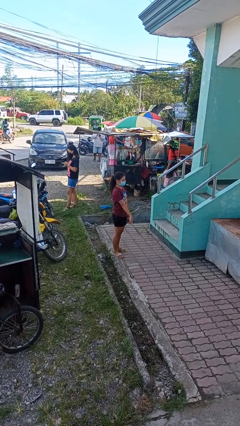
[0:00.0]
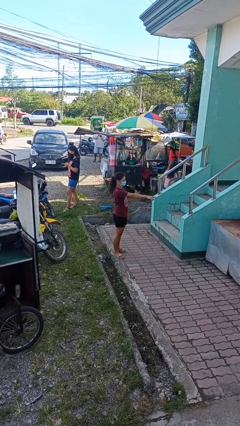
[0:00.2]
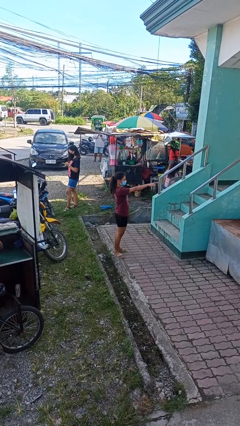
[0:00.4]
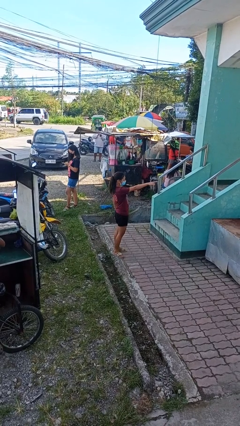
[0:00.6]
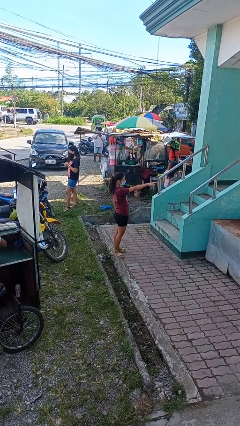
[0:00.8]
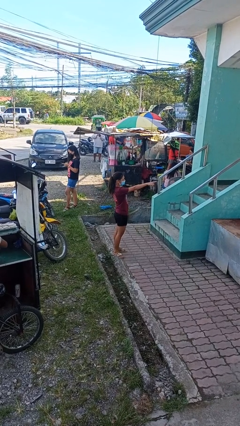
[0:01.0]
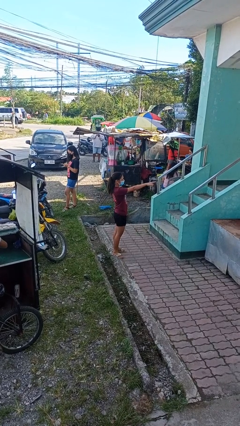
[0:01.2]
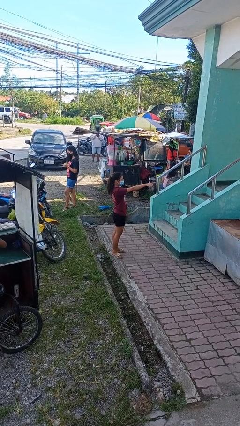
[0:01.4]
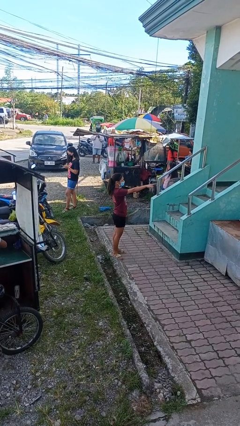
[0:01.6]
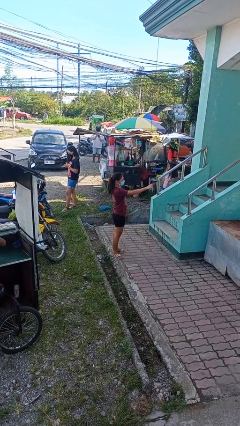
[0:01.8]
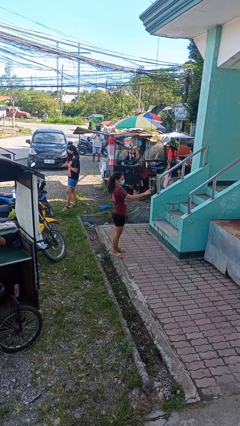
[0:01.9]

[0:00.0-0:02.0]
person points at person

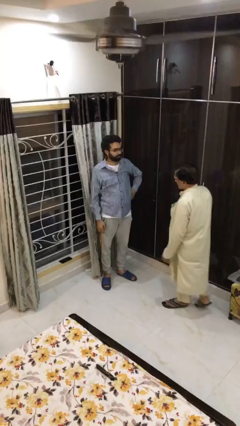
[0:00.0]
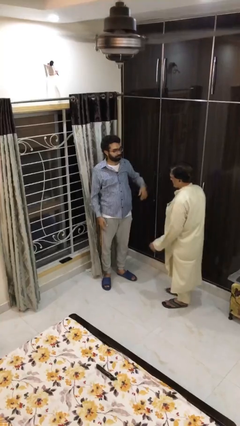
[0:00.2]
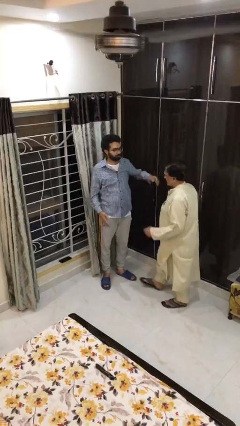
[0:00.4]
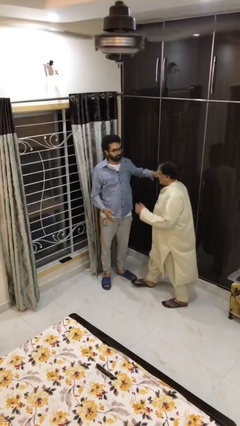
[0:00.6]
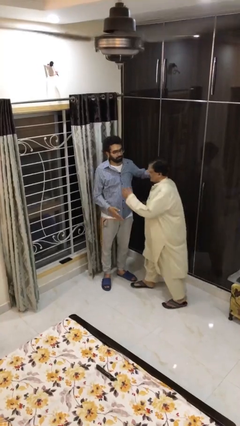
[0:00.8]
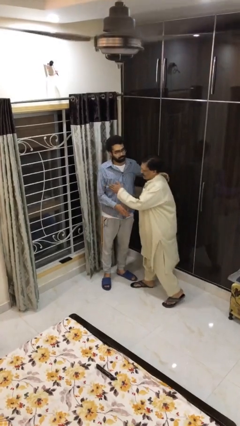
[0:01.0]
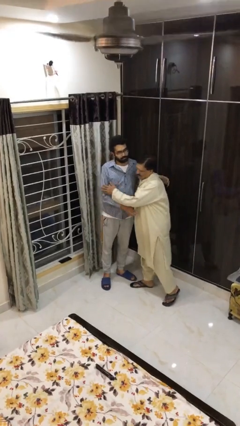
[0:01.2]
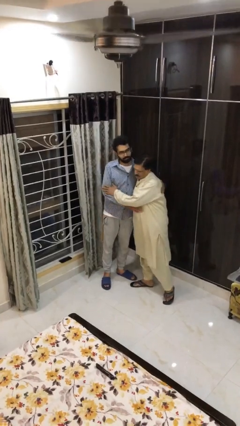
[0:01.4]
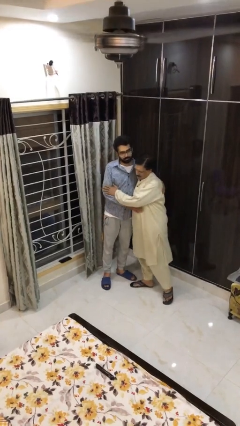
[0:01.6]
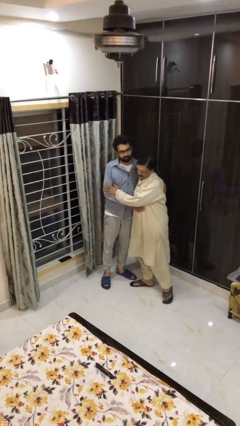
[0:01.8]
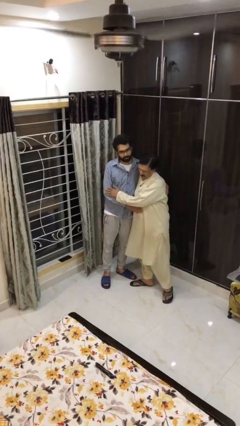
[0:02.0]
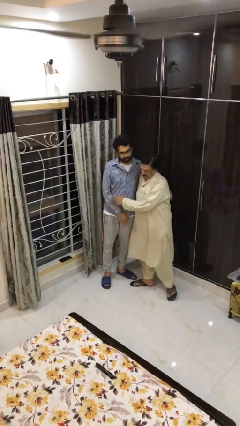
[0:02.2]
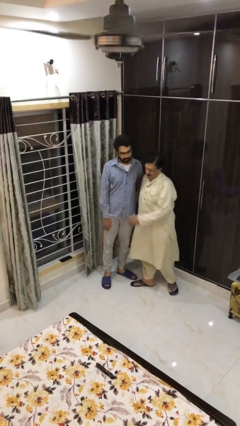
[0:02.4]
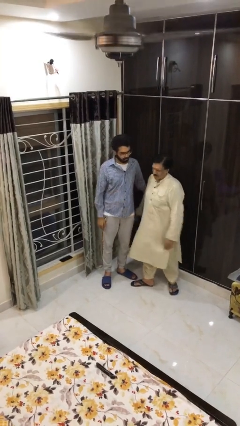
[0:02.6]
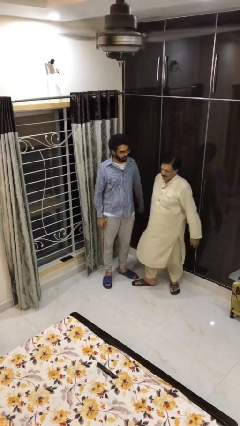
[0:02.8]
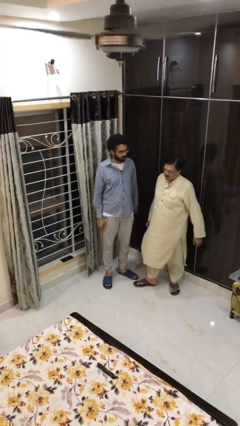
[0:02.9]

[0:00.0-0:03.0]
person embraces person

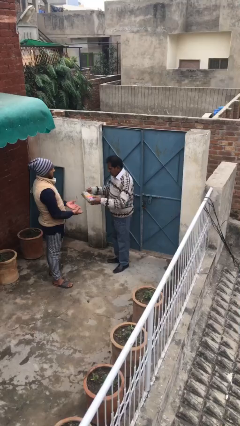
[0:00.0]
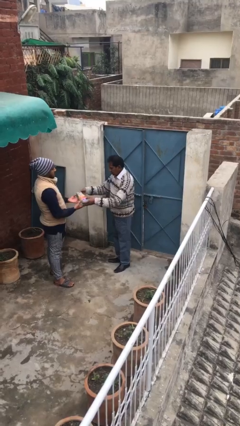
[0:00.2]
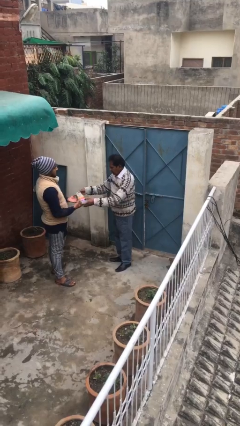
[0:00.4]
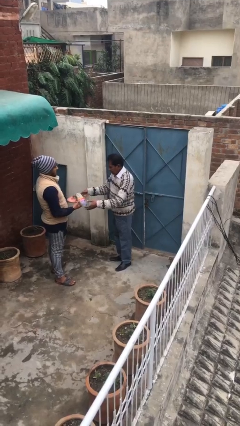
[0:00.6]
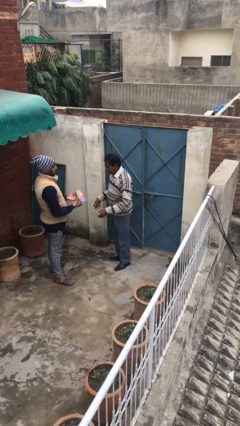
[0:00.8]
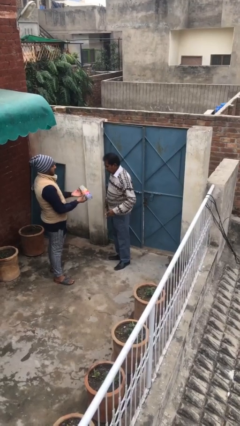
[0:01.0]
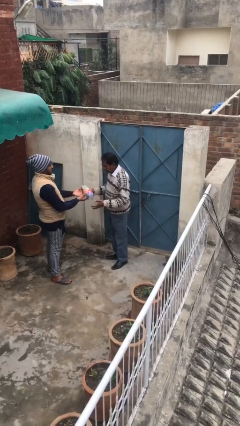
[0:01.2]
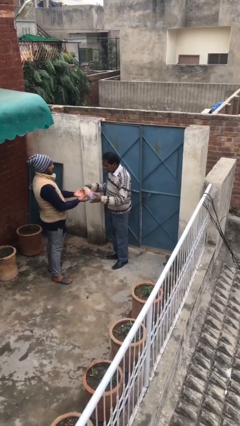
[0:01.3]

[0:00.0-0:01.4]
person transfers object to person

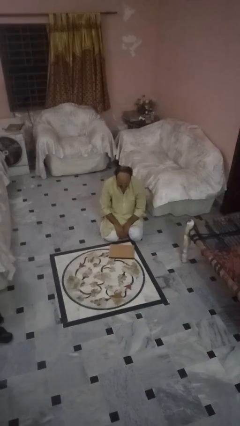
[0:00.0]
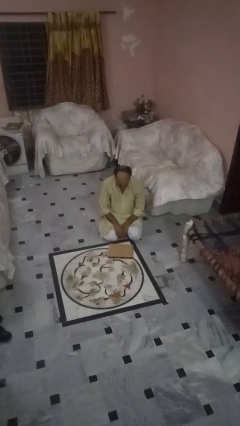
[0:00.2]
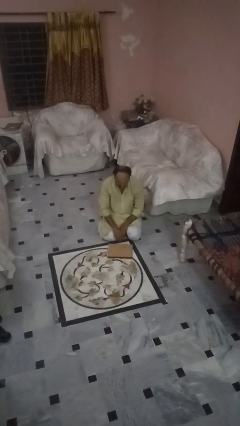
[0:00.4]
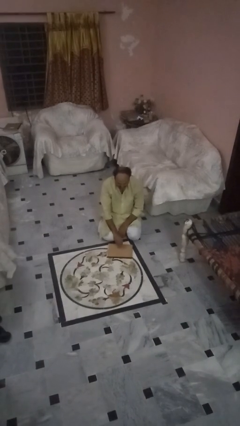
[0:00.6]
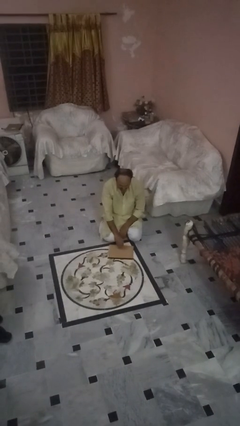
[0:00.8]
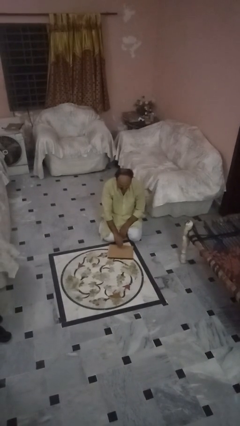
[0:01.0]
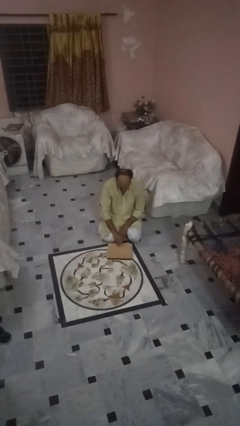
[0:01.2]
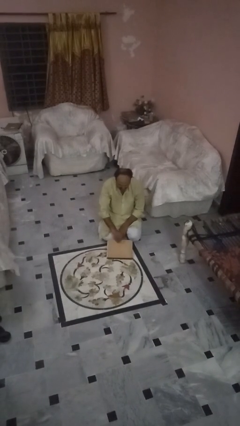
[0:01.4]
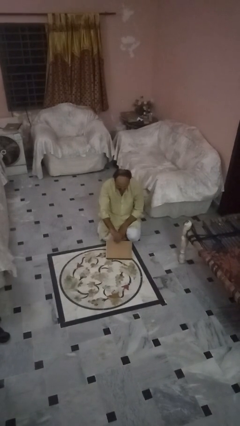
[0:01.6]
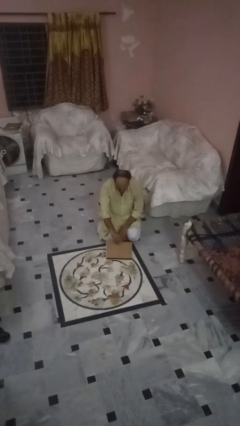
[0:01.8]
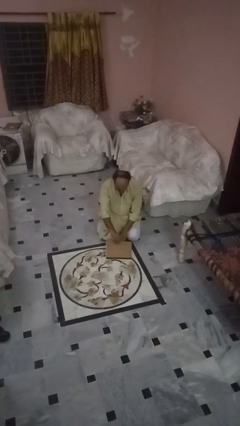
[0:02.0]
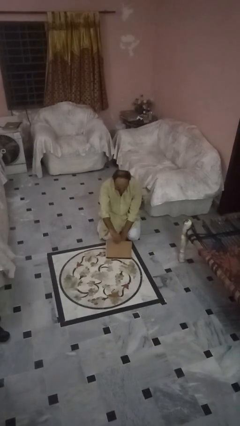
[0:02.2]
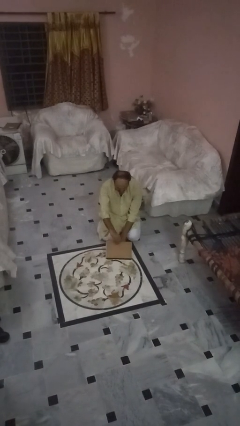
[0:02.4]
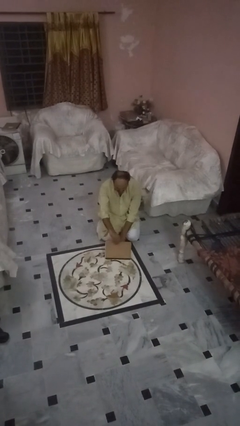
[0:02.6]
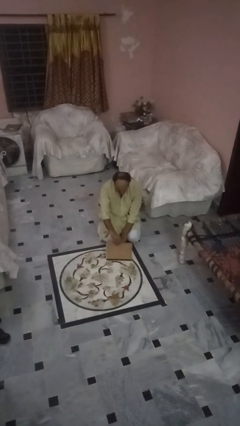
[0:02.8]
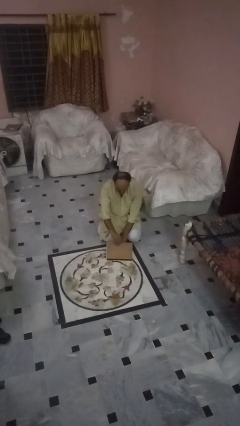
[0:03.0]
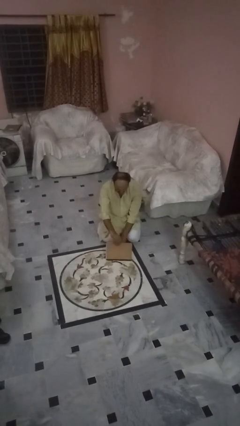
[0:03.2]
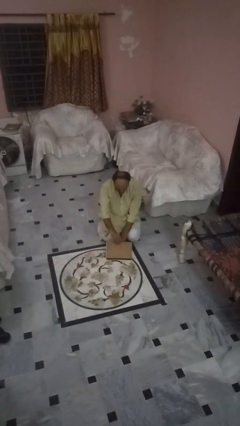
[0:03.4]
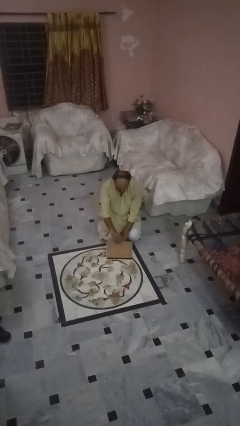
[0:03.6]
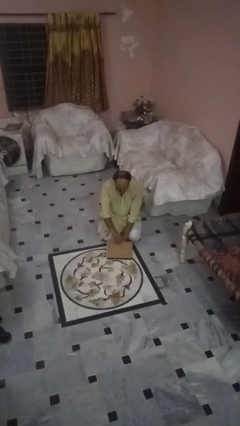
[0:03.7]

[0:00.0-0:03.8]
person opens laptop

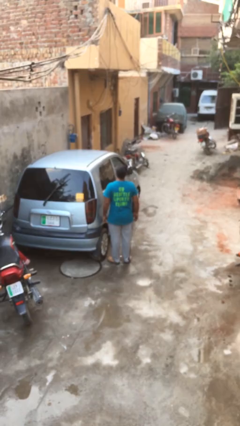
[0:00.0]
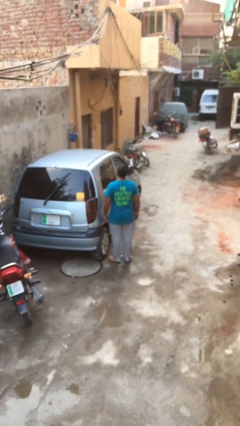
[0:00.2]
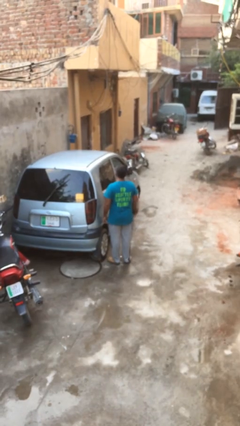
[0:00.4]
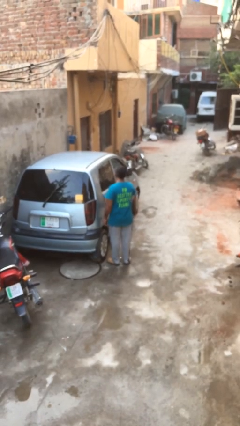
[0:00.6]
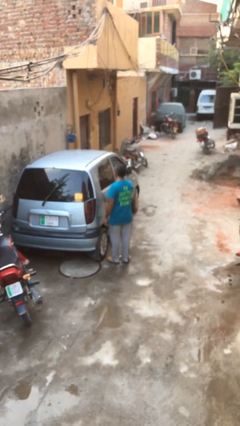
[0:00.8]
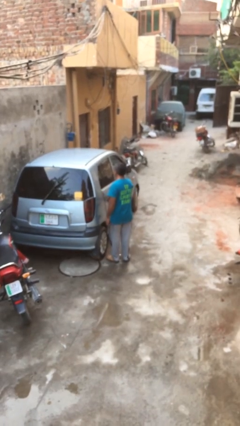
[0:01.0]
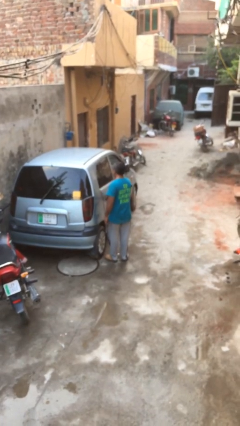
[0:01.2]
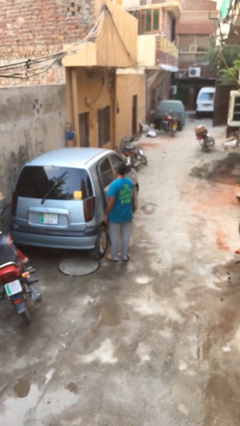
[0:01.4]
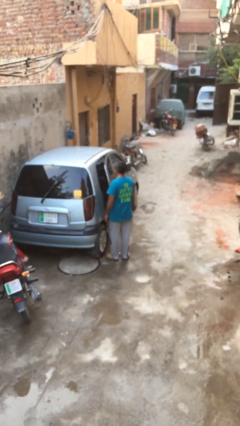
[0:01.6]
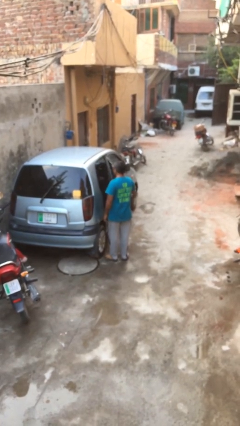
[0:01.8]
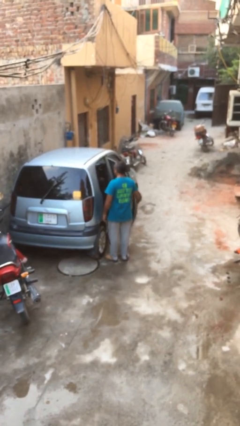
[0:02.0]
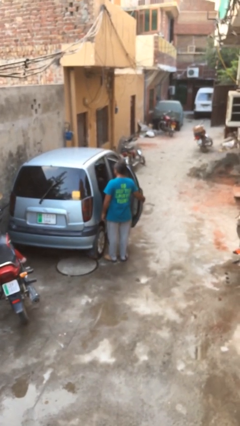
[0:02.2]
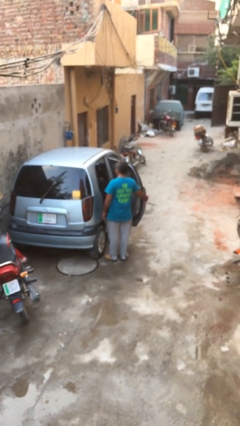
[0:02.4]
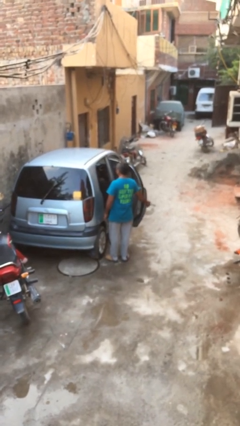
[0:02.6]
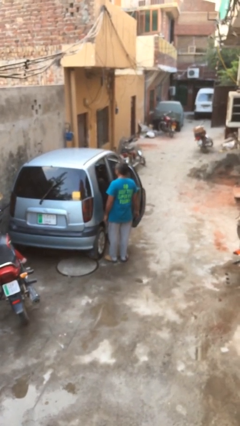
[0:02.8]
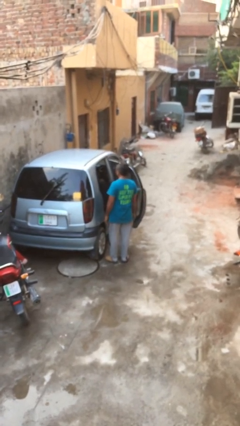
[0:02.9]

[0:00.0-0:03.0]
person opens car door

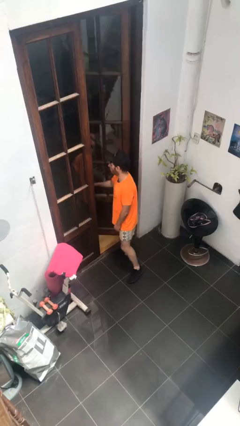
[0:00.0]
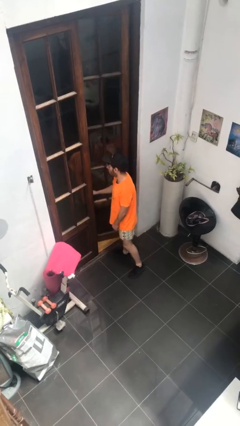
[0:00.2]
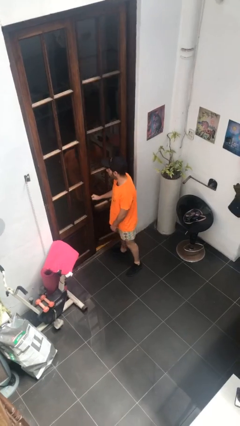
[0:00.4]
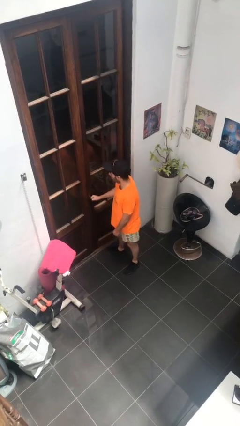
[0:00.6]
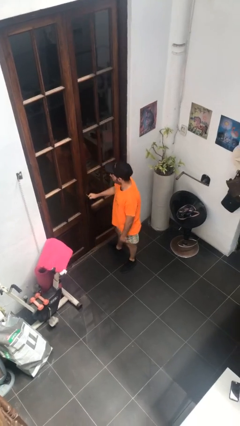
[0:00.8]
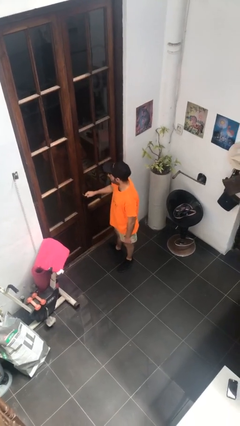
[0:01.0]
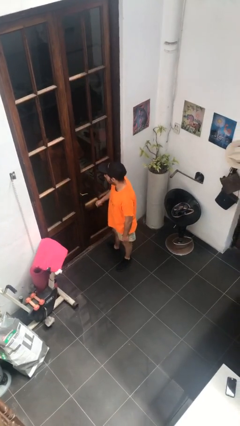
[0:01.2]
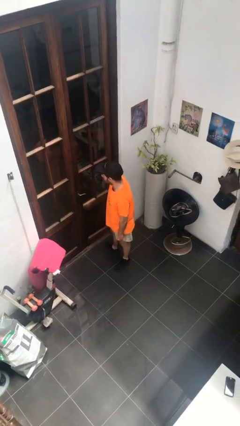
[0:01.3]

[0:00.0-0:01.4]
person closes facility door

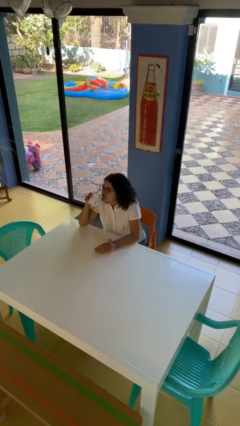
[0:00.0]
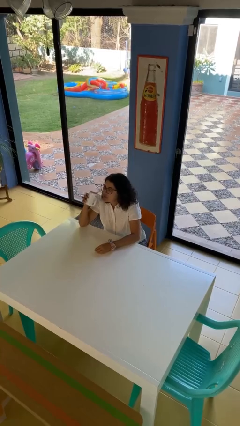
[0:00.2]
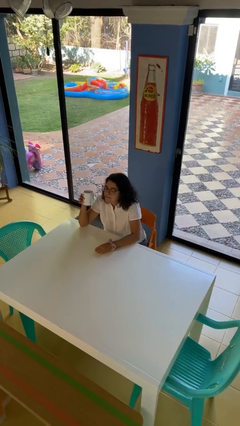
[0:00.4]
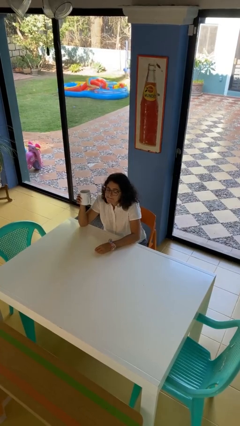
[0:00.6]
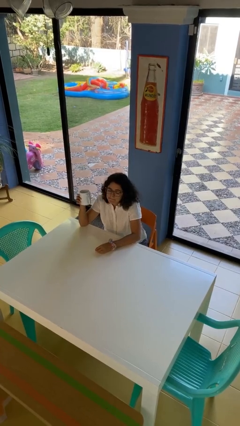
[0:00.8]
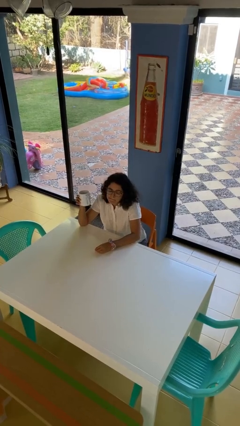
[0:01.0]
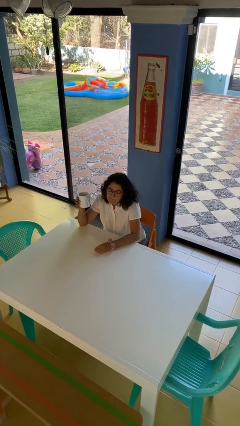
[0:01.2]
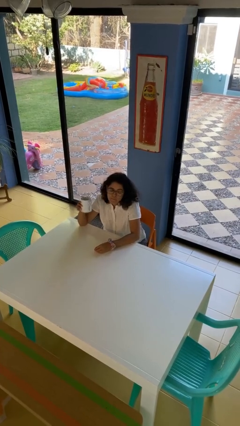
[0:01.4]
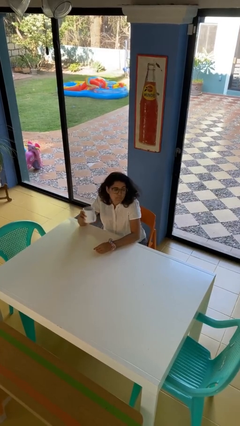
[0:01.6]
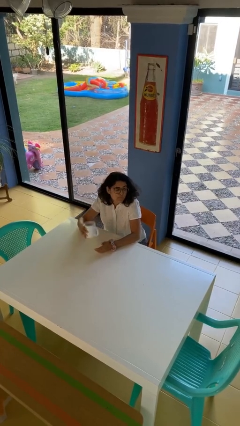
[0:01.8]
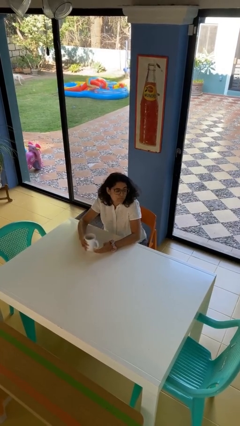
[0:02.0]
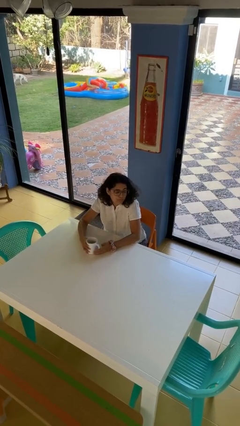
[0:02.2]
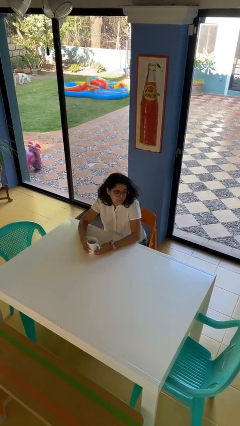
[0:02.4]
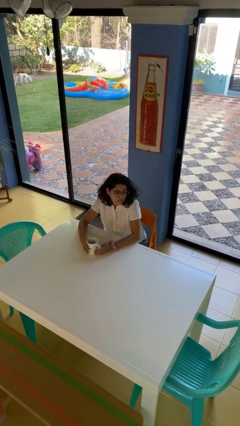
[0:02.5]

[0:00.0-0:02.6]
person puts down object on table

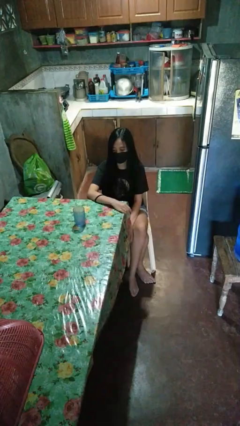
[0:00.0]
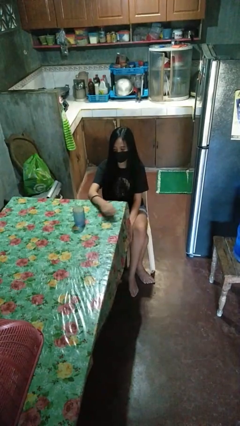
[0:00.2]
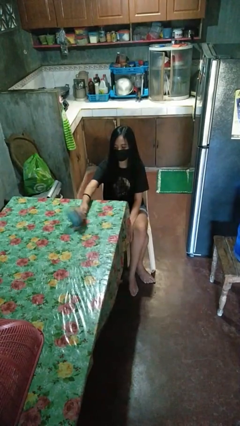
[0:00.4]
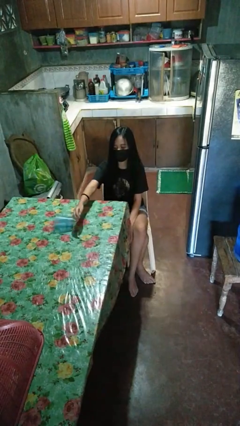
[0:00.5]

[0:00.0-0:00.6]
person knocks over glass
